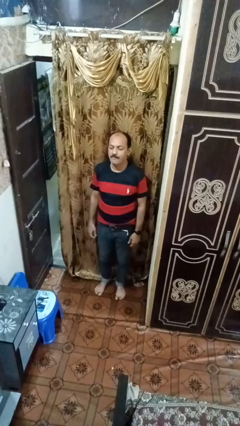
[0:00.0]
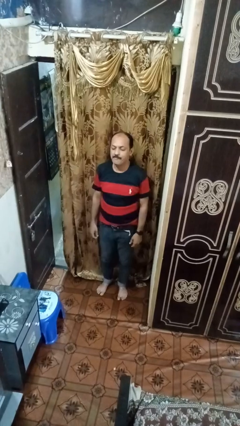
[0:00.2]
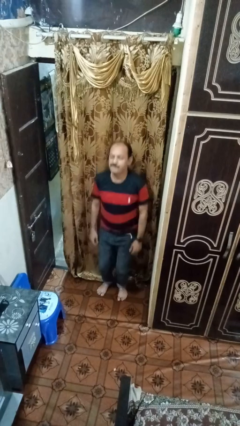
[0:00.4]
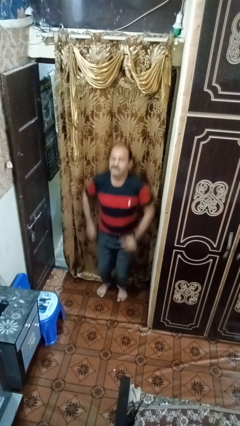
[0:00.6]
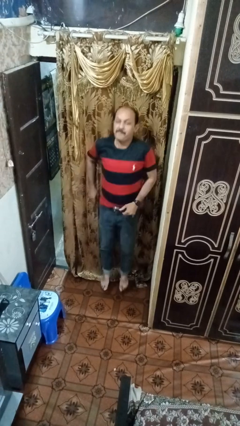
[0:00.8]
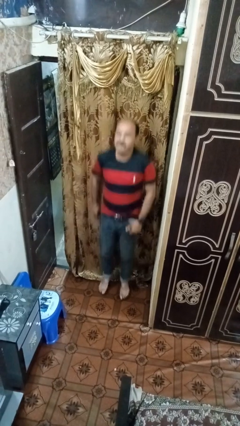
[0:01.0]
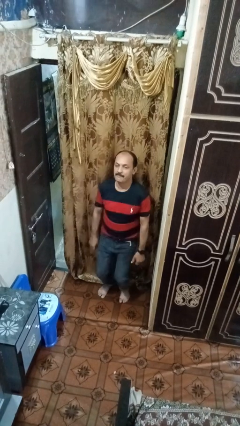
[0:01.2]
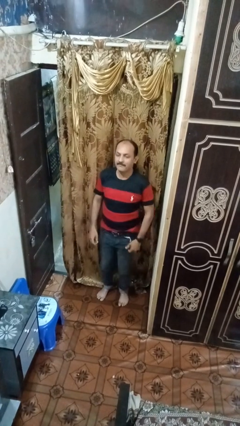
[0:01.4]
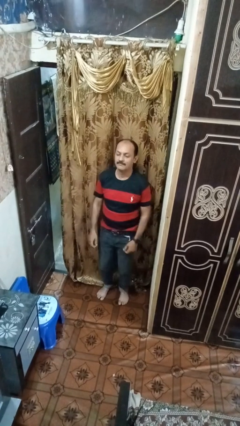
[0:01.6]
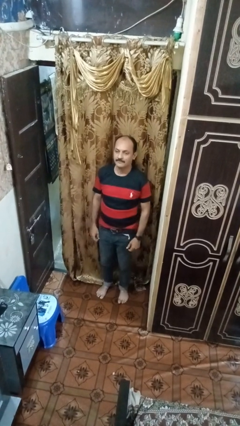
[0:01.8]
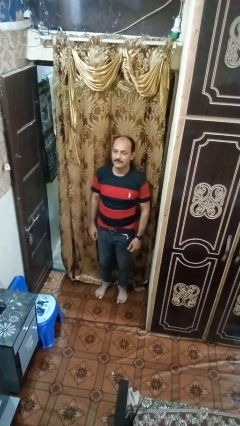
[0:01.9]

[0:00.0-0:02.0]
person jumps

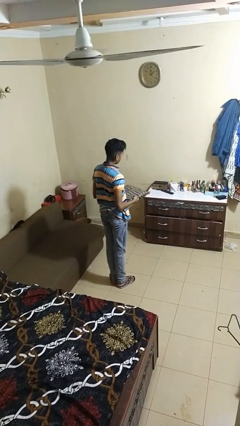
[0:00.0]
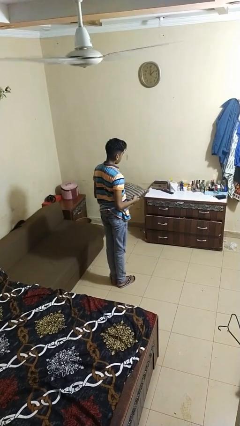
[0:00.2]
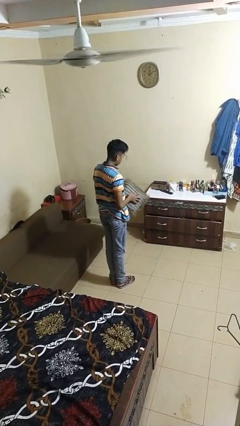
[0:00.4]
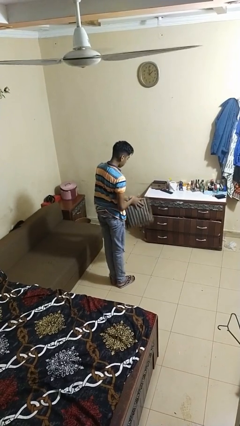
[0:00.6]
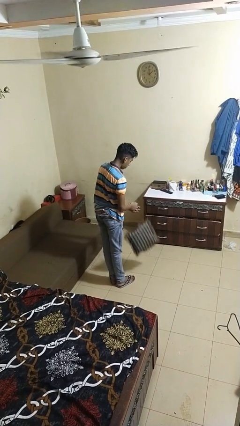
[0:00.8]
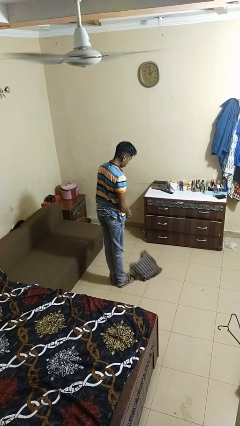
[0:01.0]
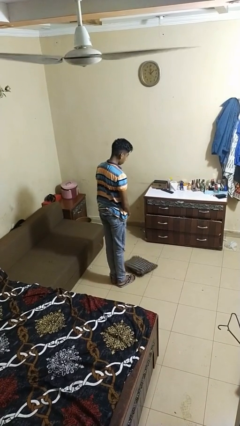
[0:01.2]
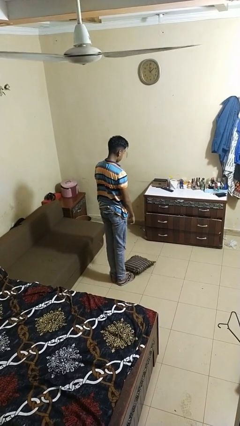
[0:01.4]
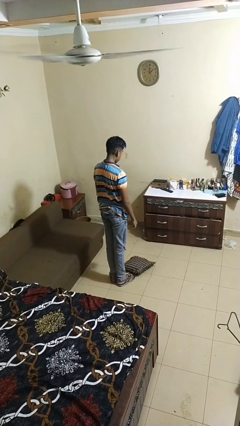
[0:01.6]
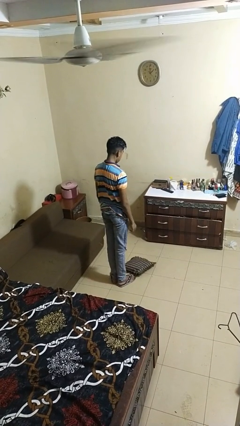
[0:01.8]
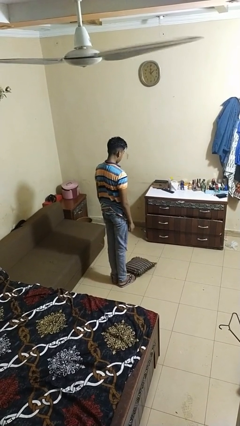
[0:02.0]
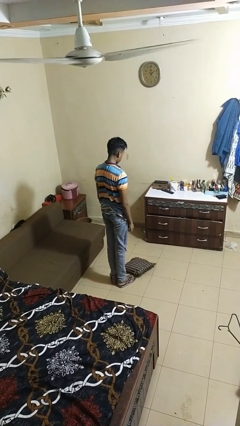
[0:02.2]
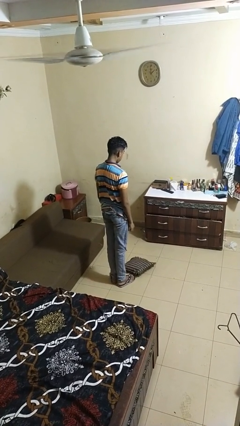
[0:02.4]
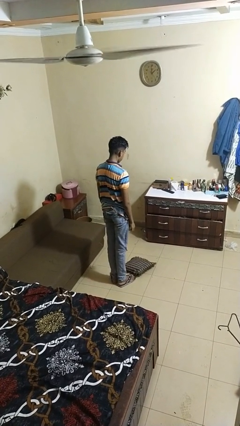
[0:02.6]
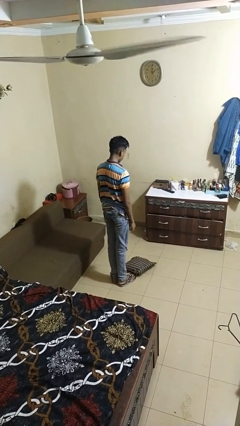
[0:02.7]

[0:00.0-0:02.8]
person drops object

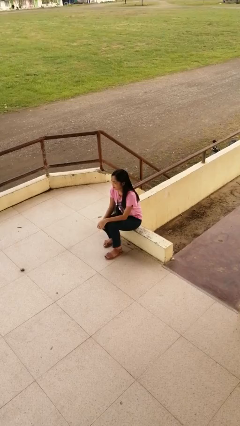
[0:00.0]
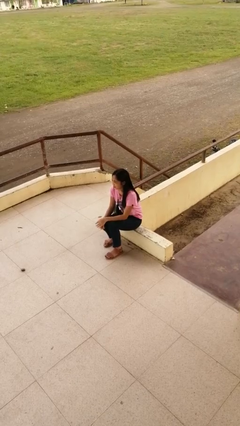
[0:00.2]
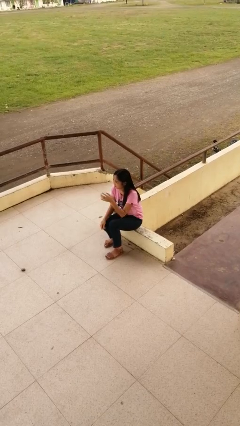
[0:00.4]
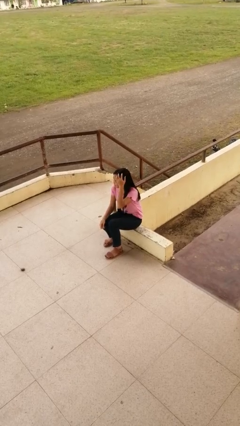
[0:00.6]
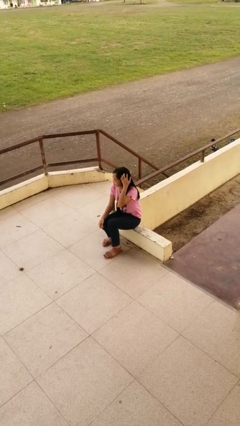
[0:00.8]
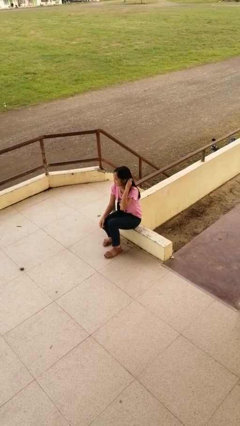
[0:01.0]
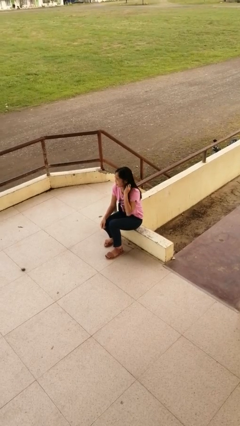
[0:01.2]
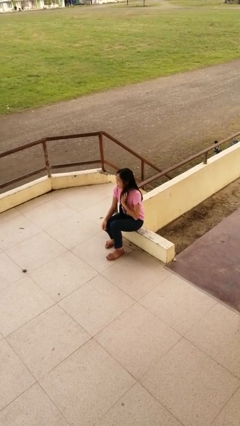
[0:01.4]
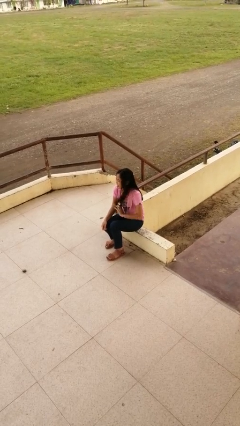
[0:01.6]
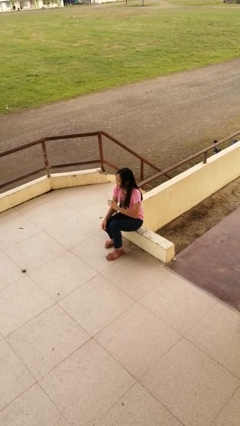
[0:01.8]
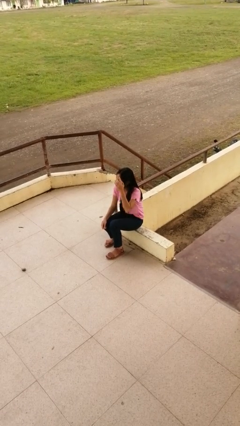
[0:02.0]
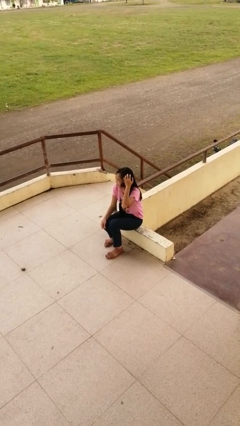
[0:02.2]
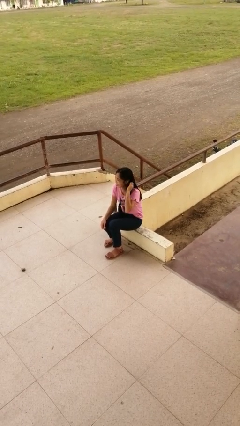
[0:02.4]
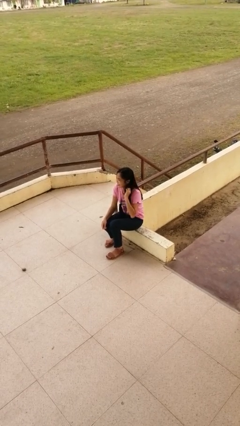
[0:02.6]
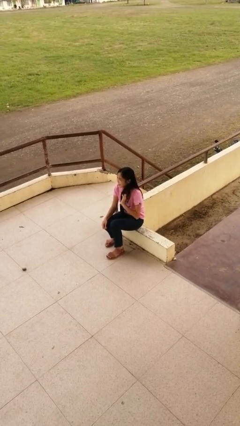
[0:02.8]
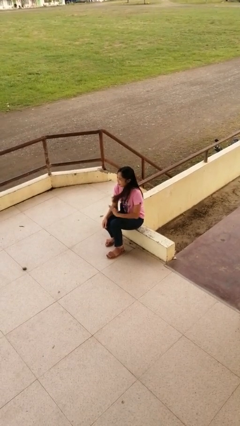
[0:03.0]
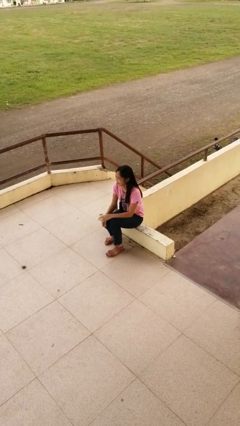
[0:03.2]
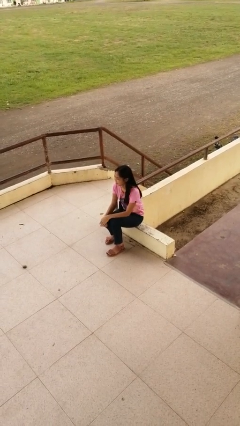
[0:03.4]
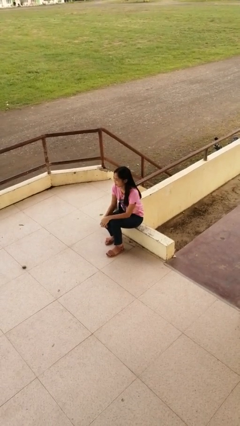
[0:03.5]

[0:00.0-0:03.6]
person strokes hair

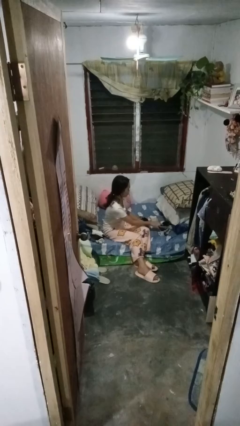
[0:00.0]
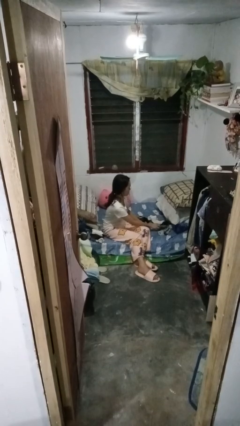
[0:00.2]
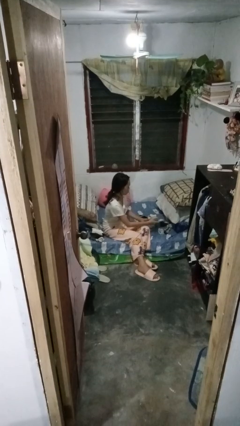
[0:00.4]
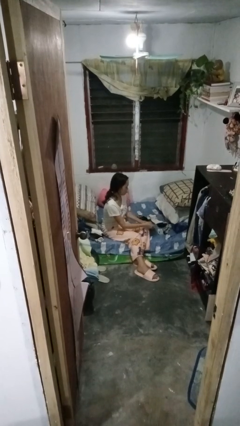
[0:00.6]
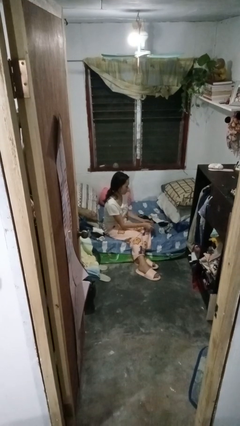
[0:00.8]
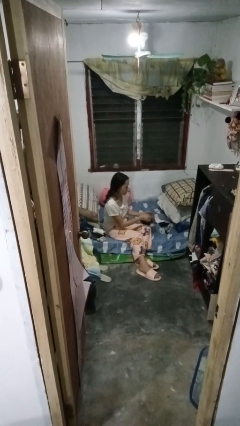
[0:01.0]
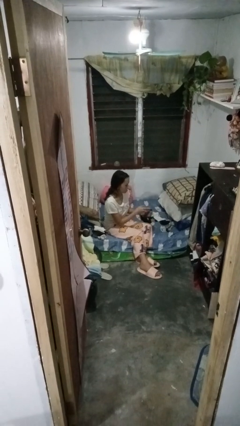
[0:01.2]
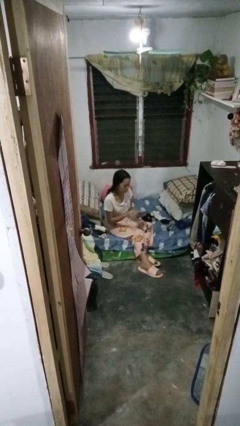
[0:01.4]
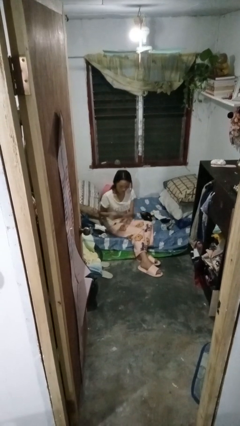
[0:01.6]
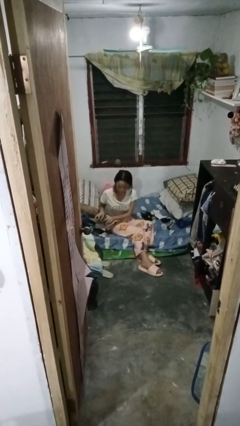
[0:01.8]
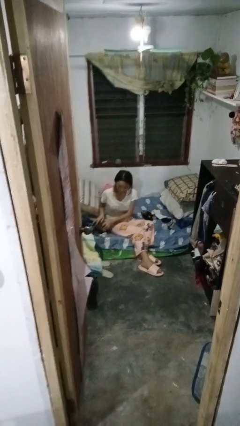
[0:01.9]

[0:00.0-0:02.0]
person folds socks

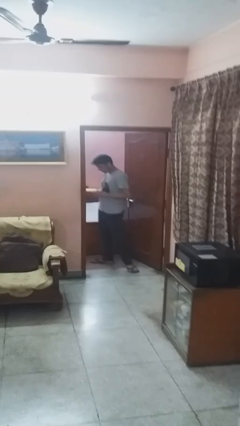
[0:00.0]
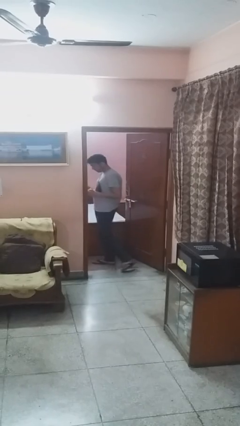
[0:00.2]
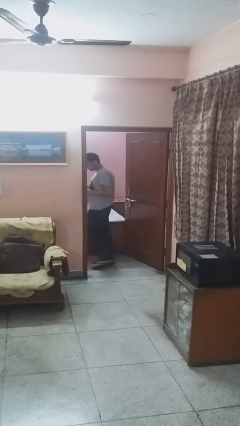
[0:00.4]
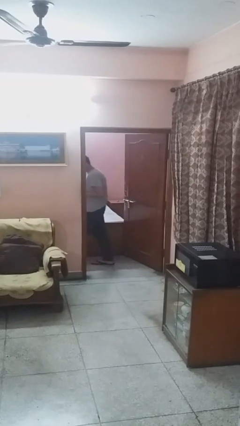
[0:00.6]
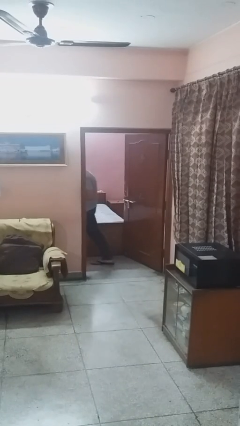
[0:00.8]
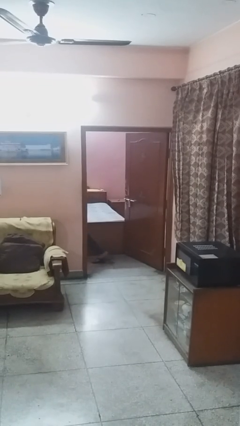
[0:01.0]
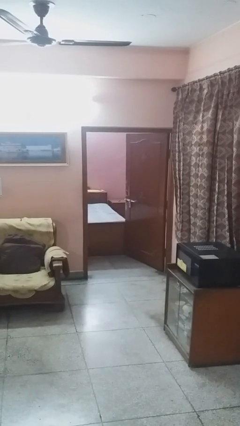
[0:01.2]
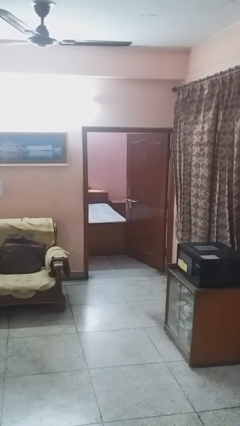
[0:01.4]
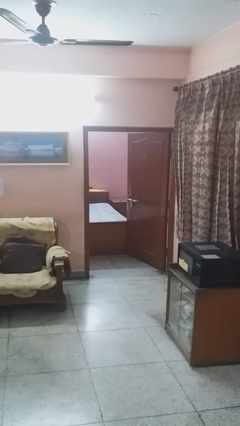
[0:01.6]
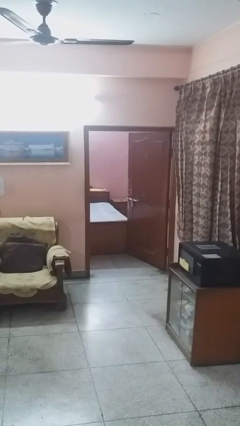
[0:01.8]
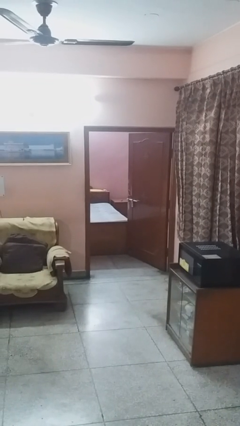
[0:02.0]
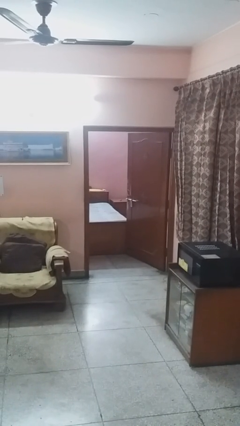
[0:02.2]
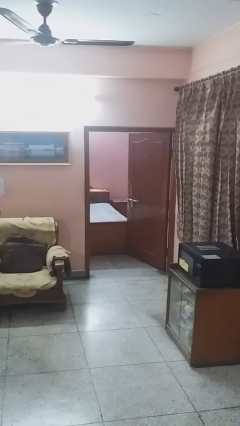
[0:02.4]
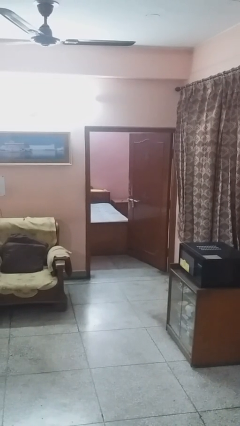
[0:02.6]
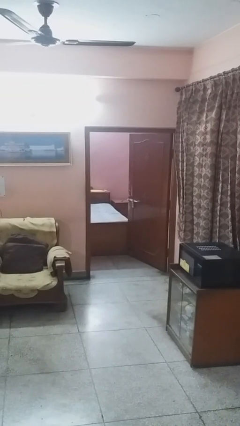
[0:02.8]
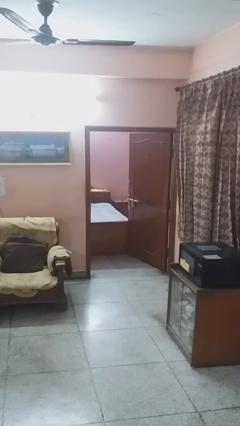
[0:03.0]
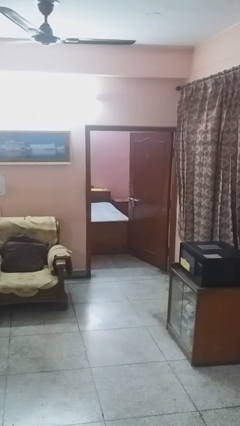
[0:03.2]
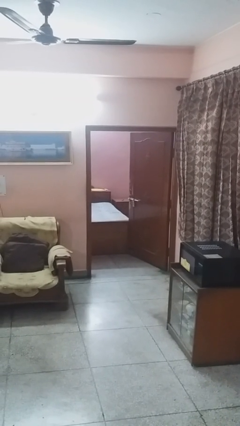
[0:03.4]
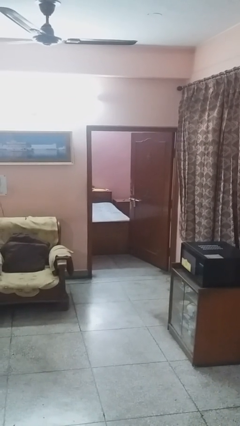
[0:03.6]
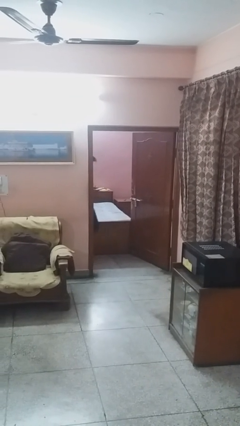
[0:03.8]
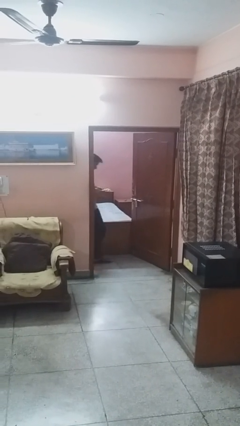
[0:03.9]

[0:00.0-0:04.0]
person exits scene through structure

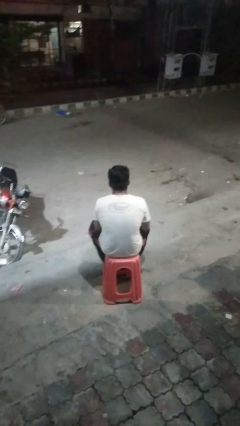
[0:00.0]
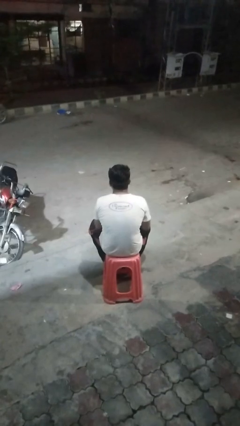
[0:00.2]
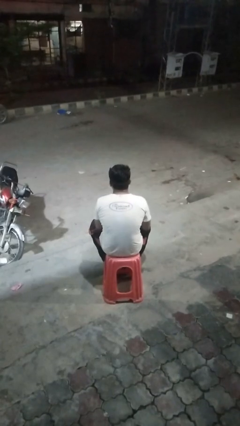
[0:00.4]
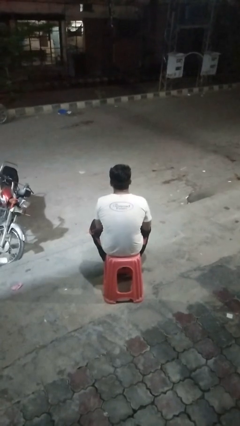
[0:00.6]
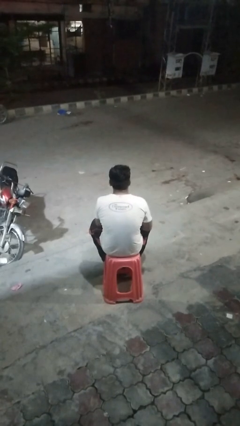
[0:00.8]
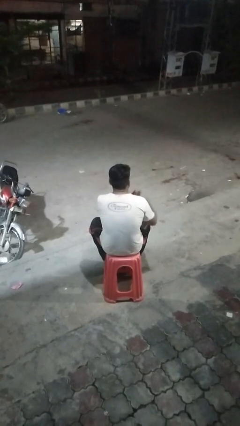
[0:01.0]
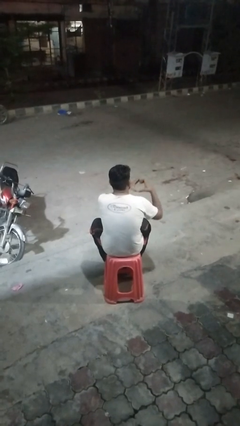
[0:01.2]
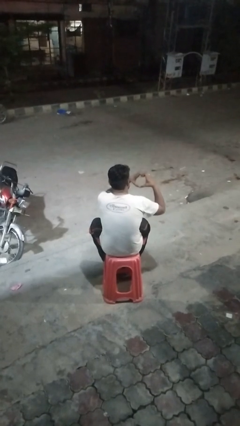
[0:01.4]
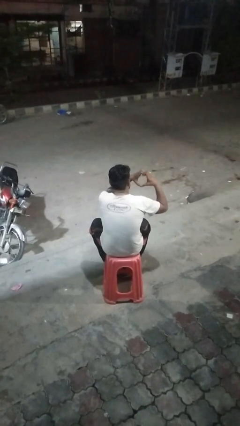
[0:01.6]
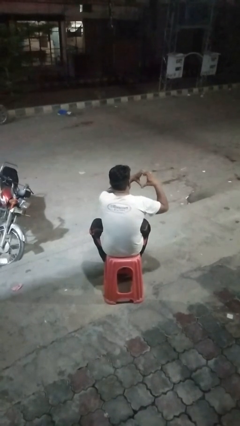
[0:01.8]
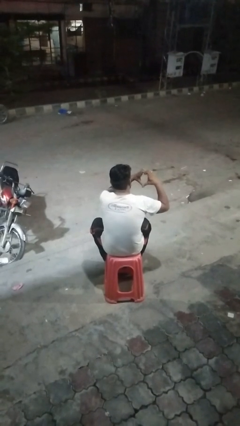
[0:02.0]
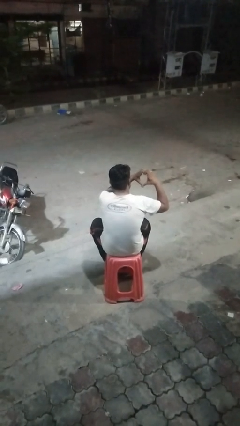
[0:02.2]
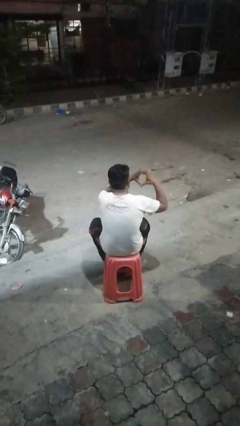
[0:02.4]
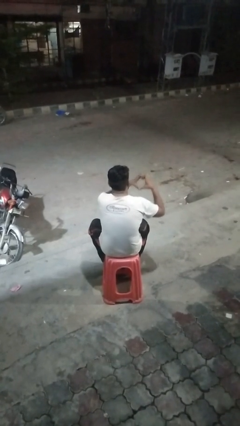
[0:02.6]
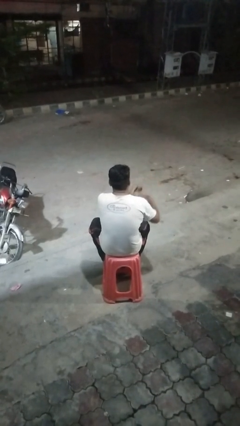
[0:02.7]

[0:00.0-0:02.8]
person gestures heart

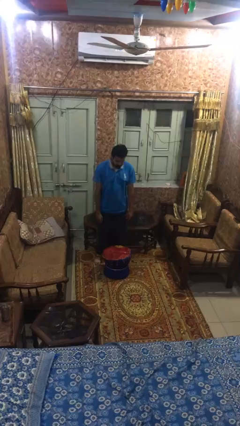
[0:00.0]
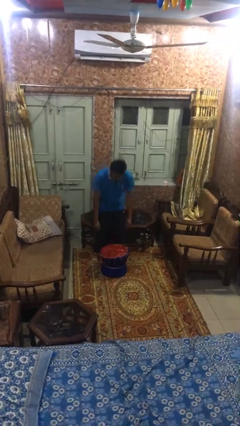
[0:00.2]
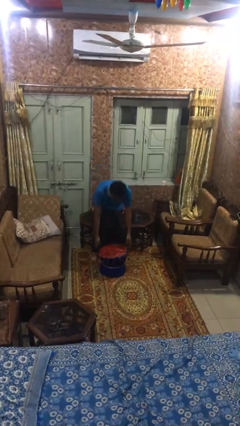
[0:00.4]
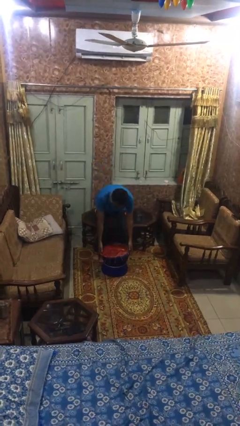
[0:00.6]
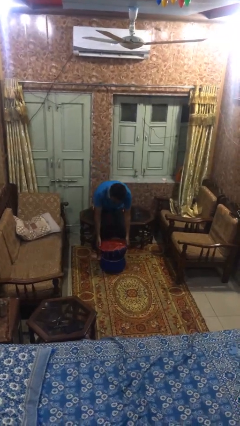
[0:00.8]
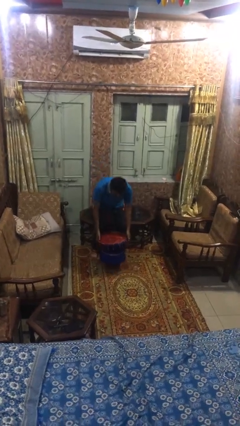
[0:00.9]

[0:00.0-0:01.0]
person picks up object from floor
